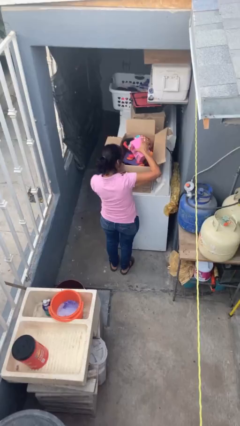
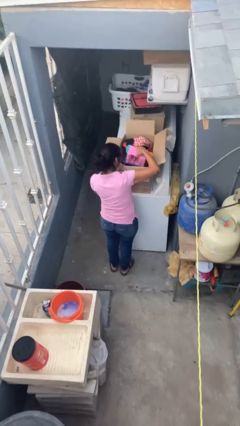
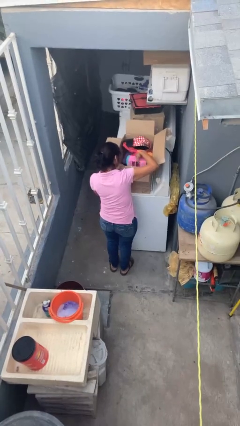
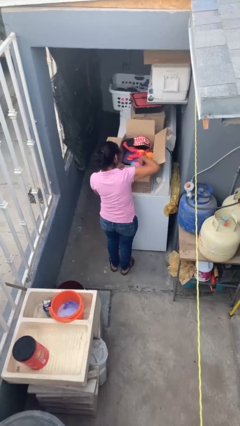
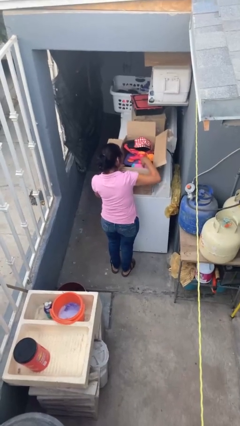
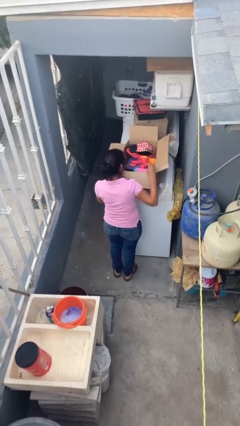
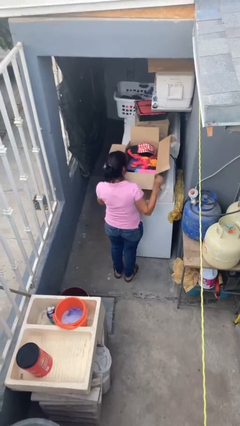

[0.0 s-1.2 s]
person puts object into box

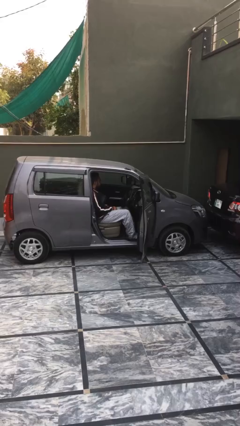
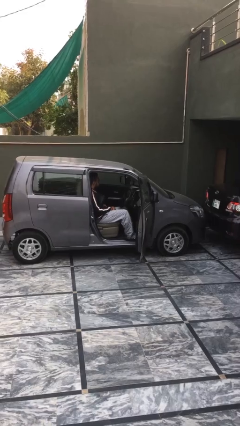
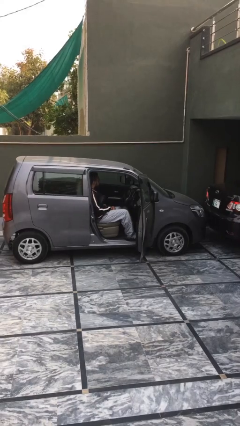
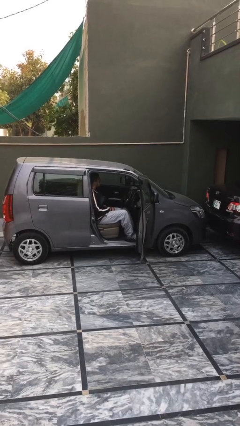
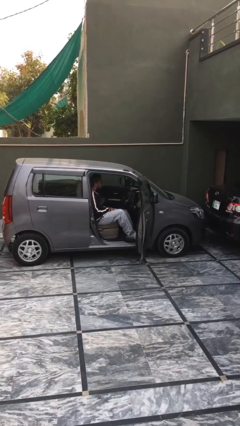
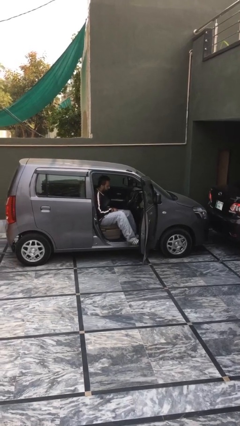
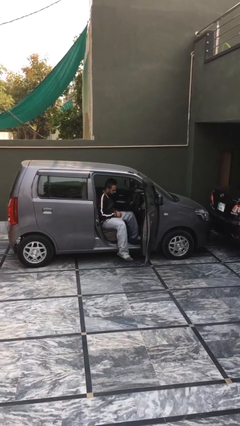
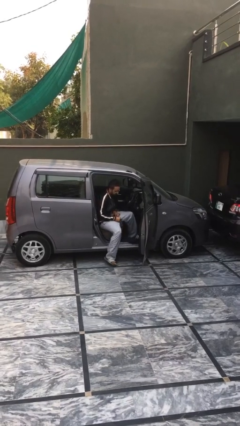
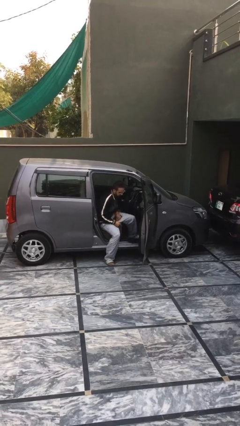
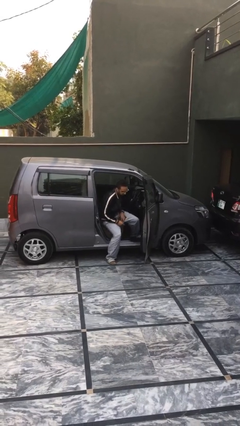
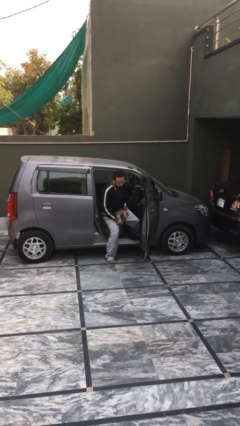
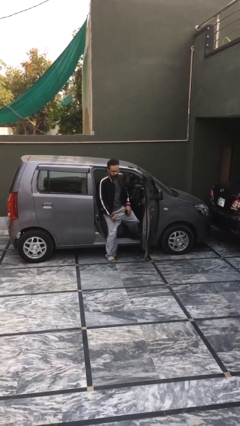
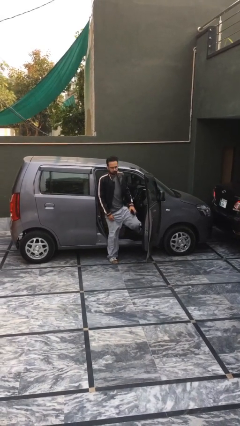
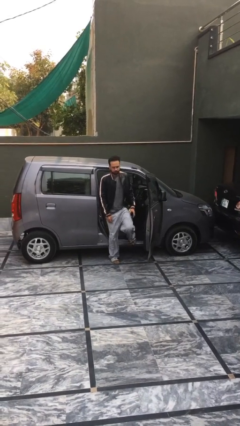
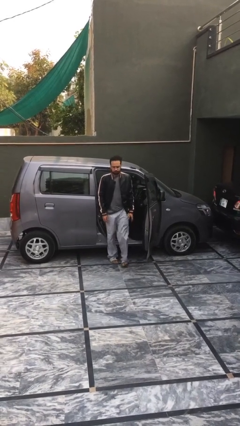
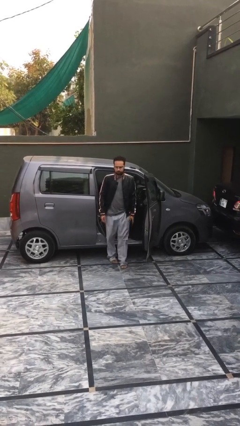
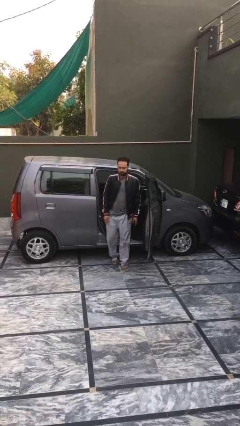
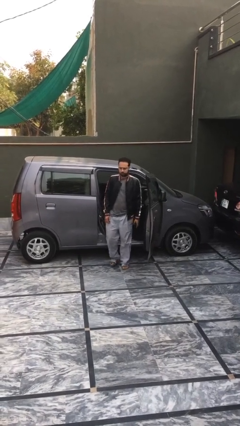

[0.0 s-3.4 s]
person exits car

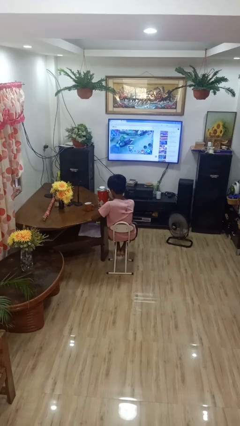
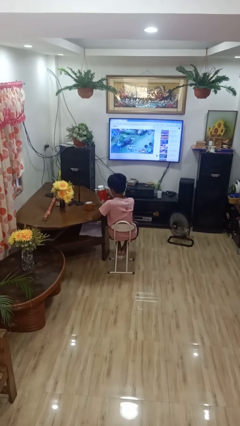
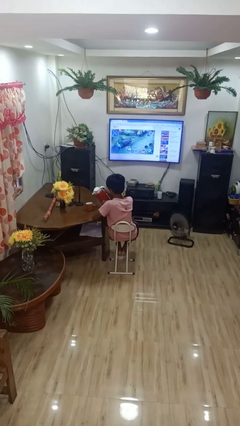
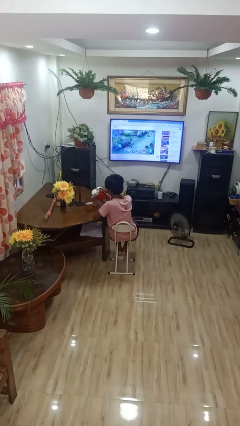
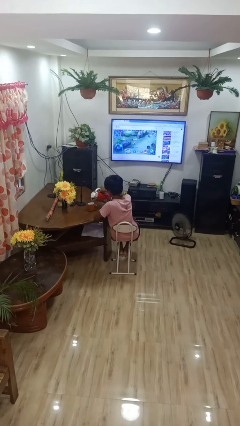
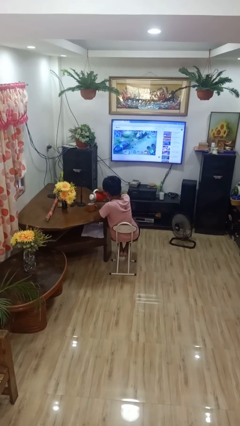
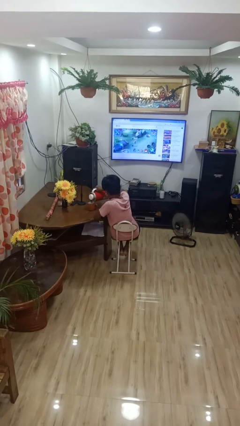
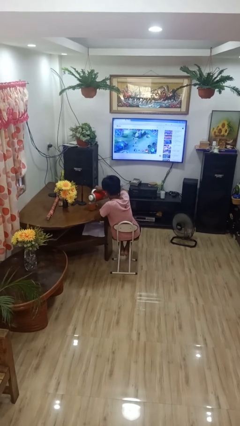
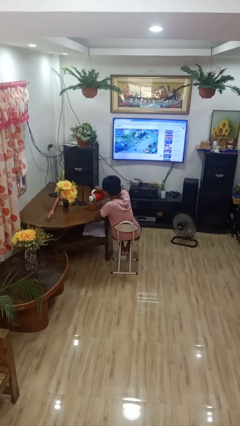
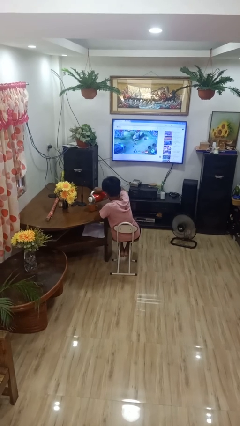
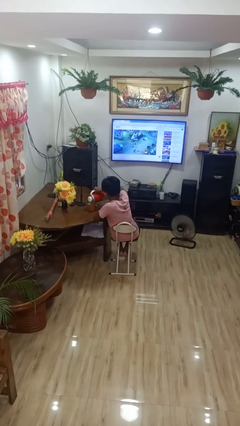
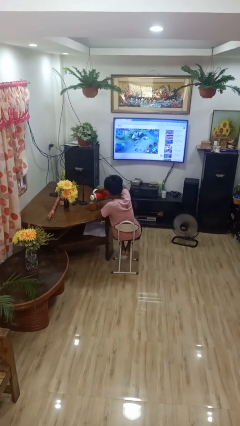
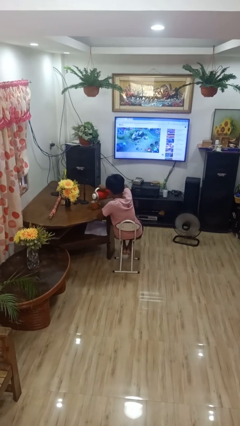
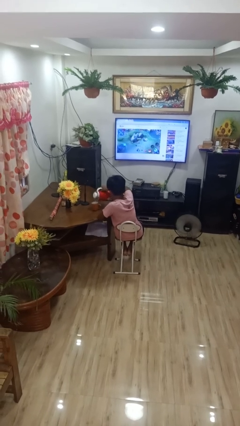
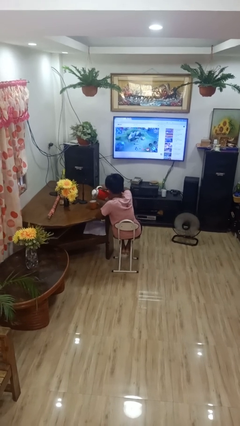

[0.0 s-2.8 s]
person pours coffee into mug

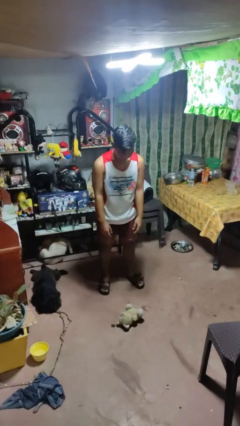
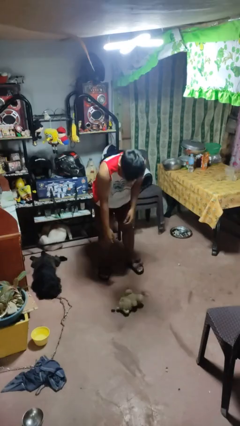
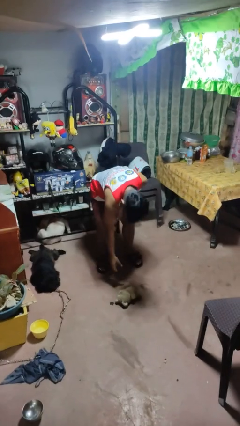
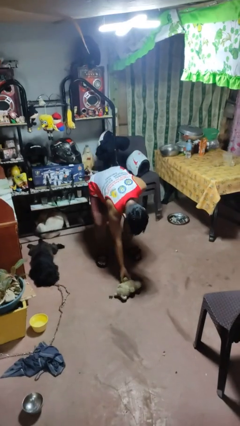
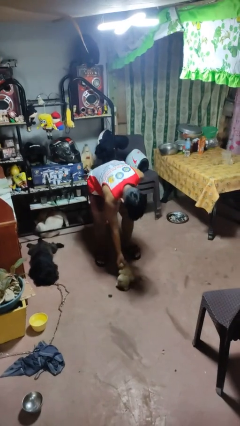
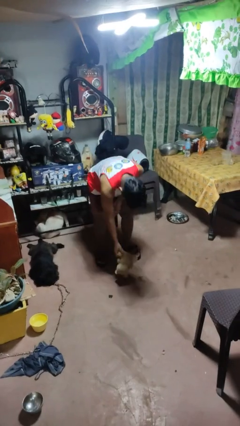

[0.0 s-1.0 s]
person picks up object from floor

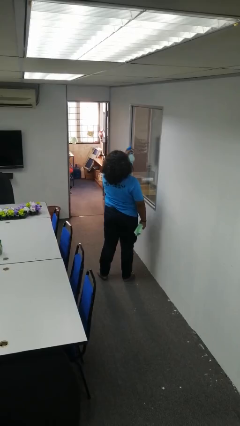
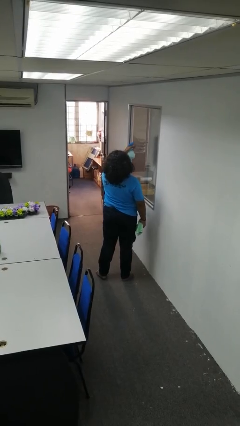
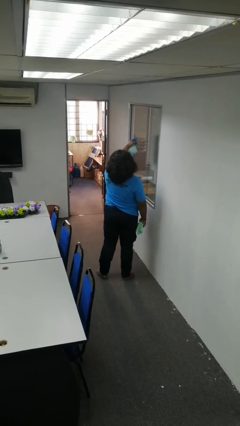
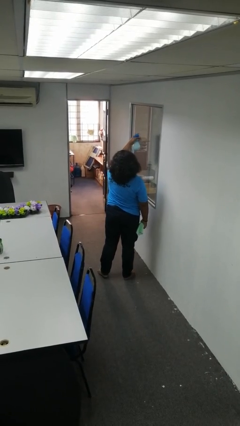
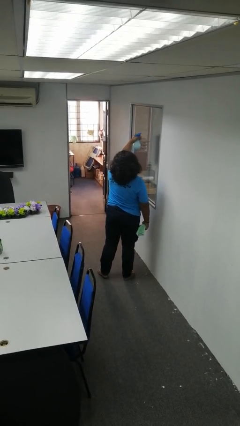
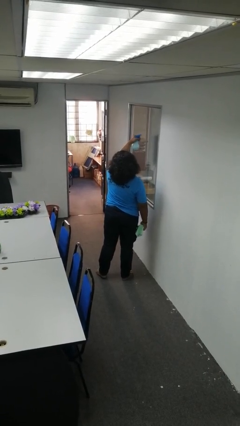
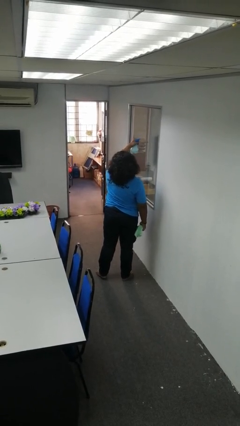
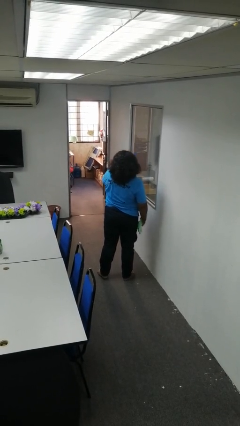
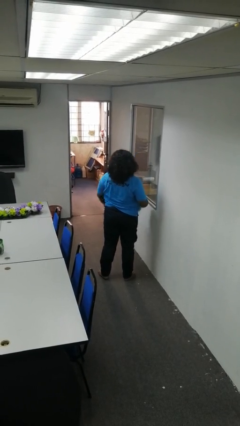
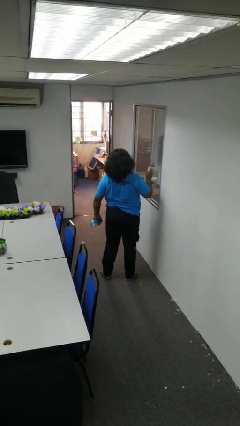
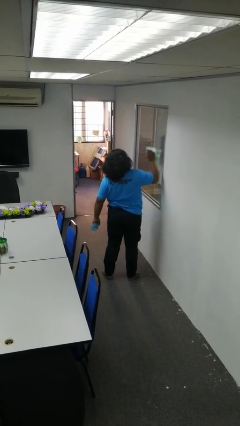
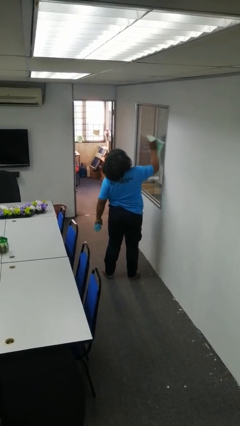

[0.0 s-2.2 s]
person sprays from bottle

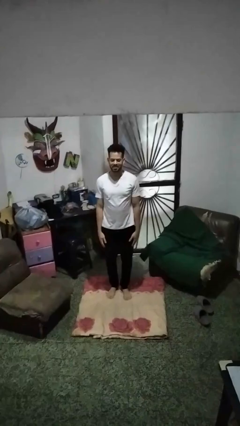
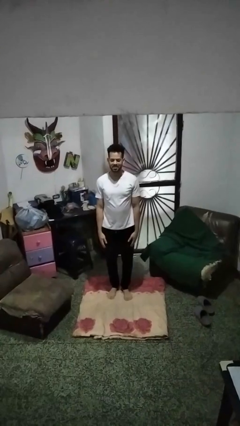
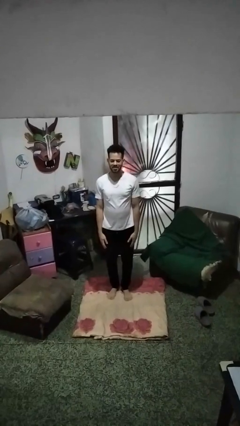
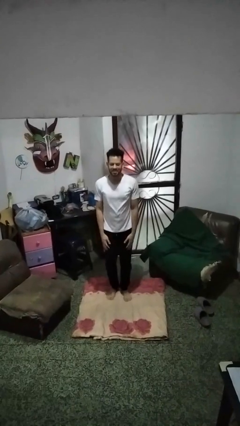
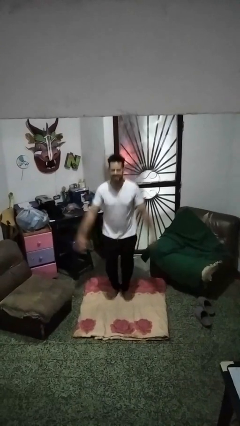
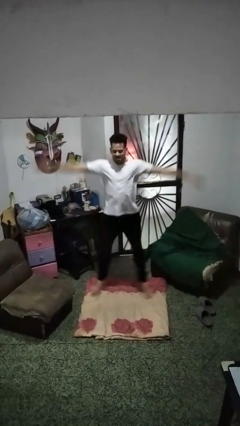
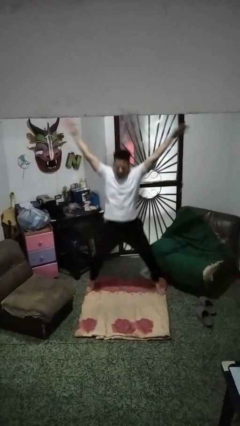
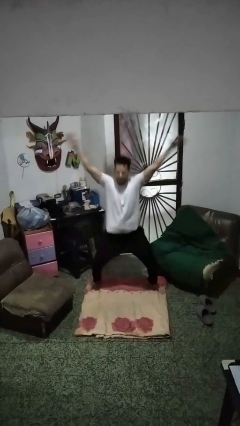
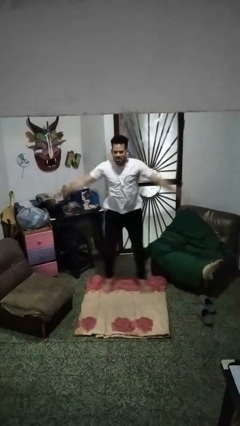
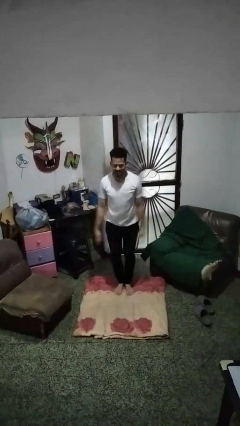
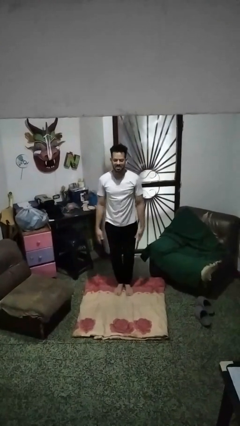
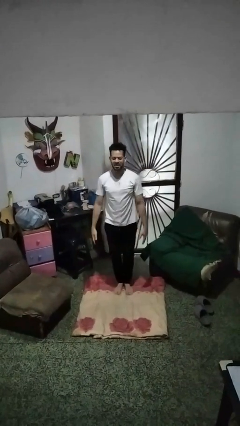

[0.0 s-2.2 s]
person exercises with jumping jacks

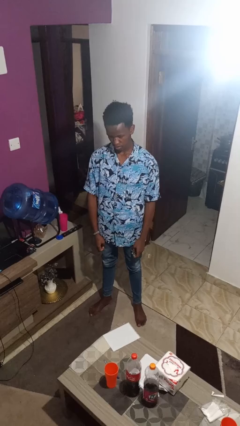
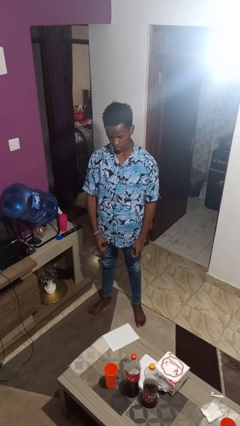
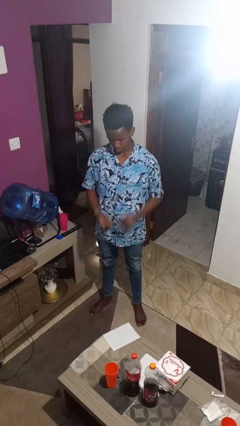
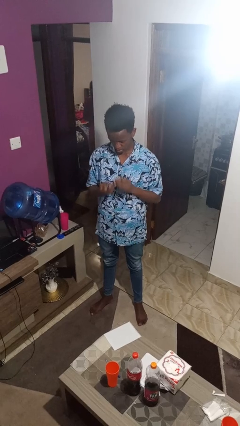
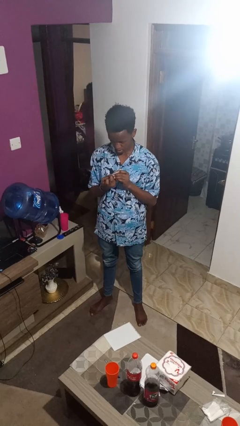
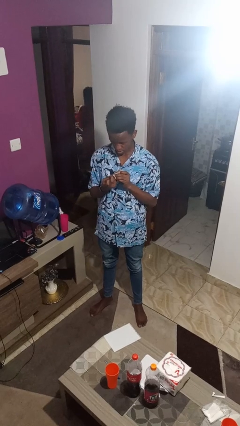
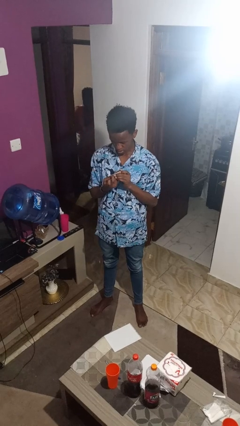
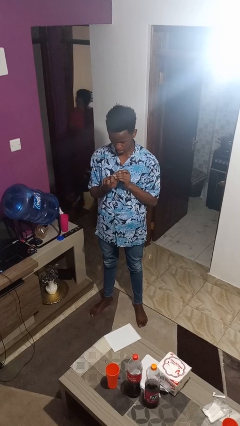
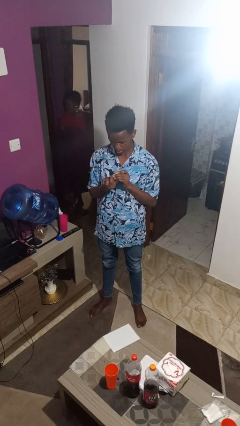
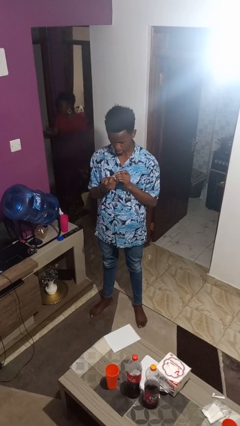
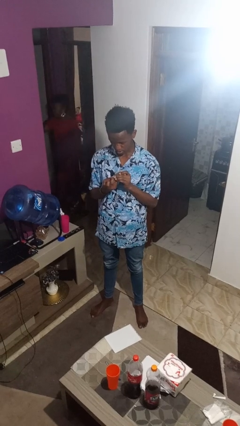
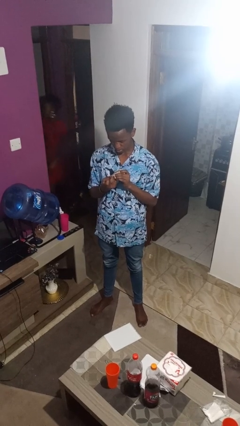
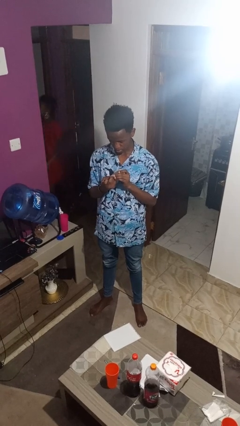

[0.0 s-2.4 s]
person clips fingernails

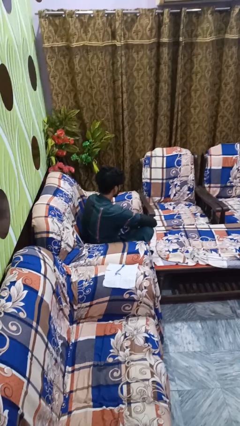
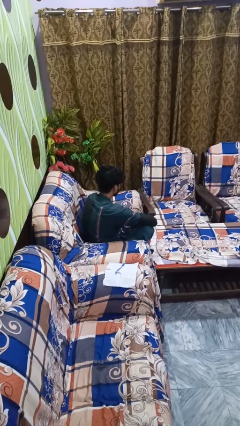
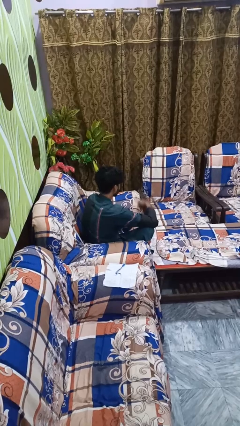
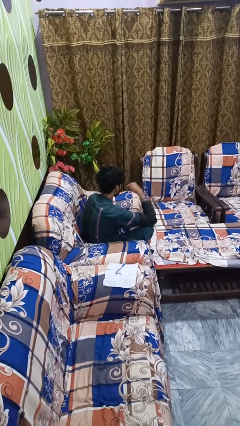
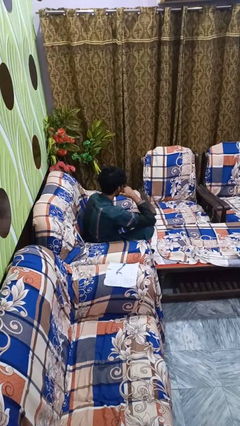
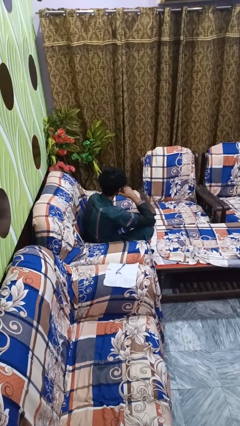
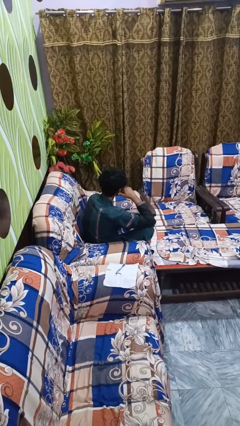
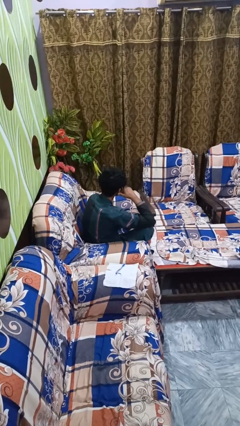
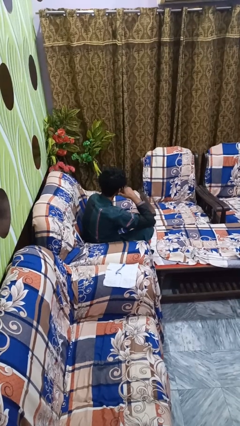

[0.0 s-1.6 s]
person gestures call me
